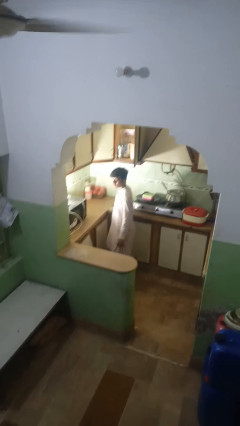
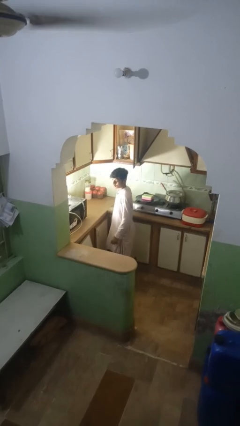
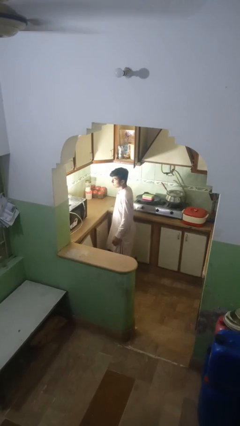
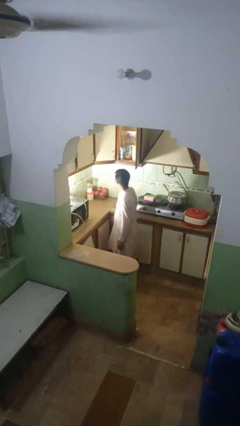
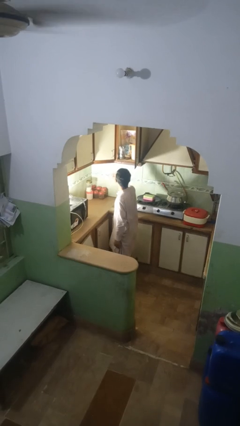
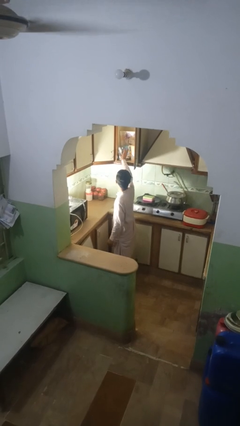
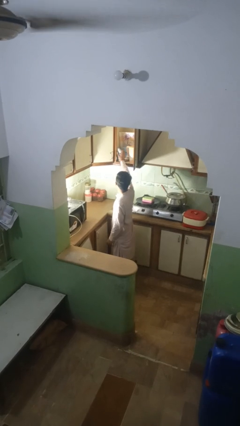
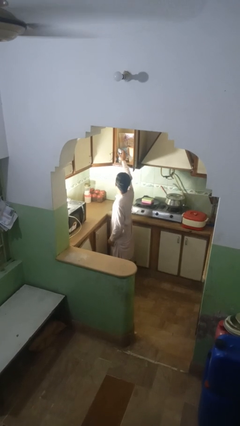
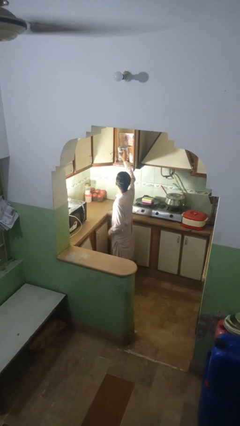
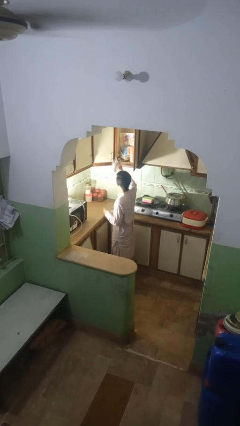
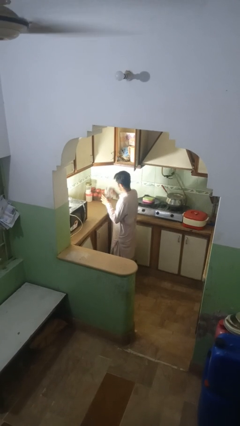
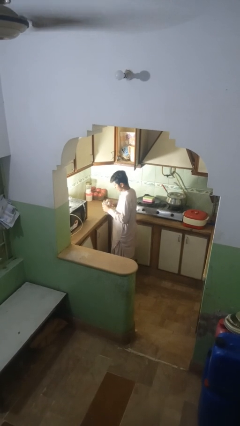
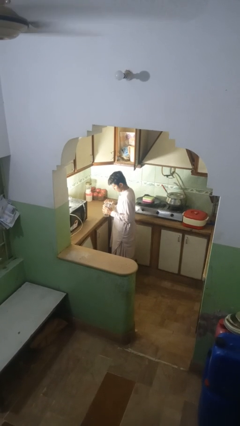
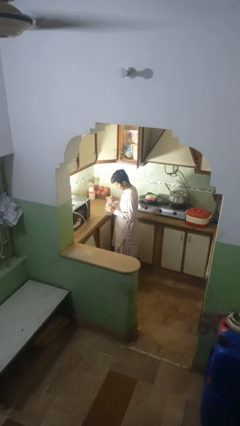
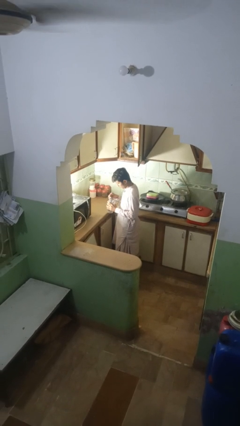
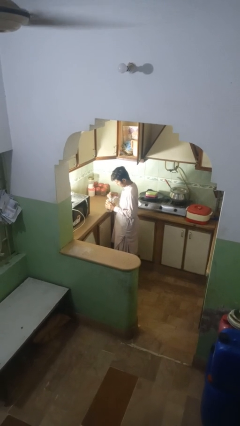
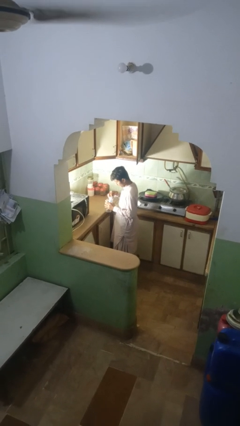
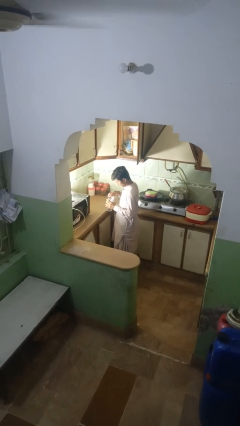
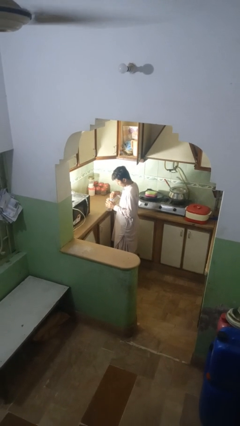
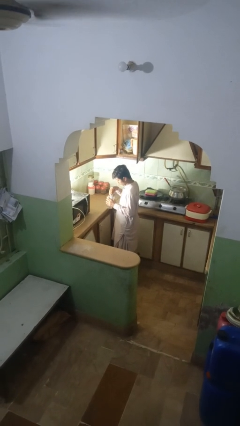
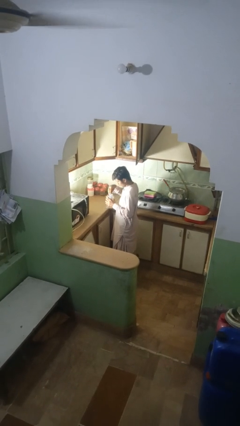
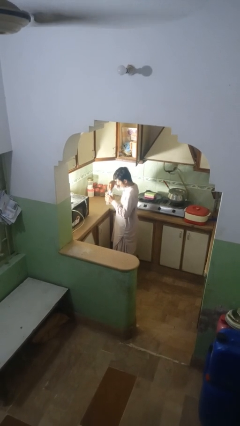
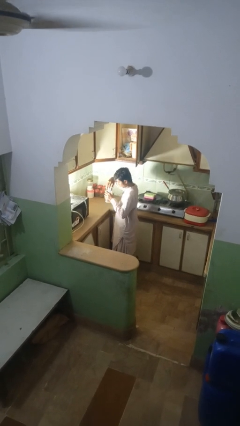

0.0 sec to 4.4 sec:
person takes object from kitchen drawer

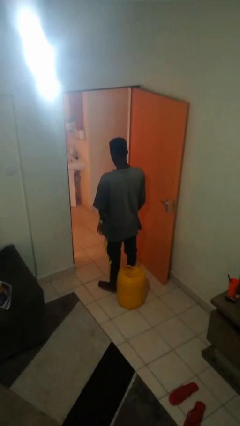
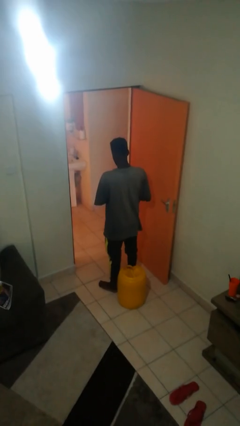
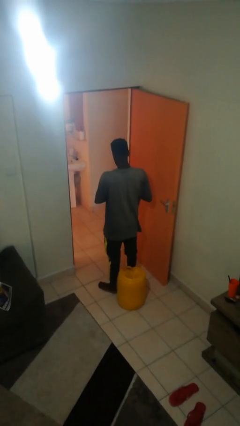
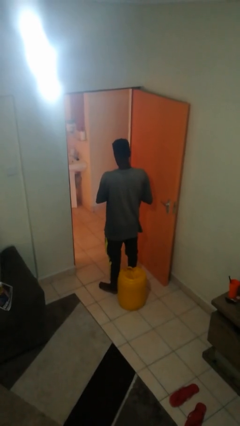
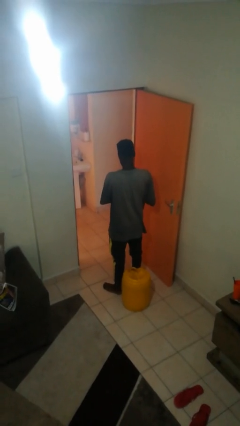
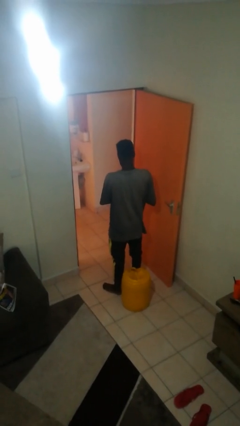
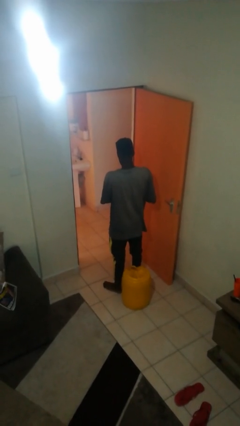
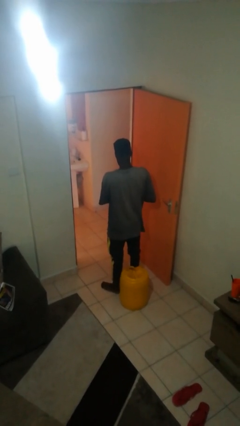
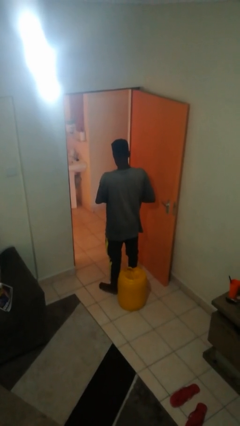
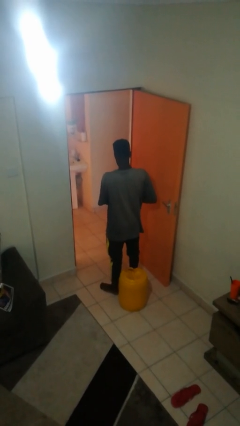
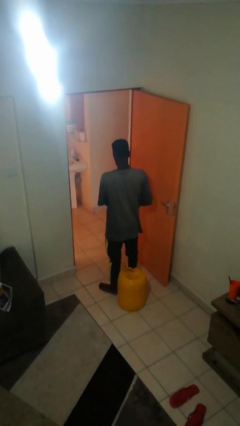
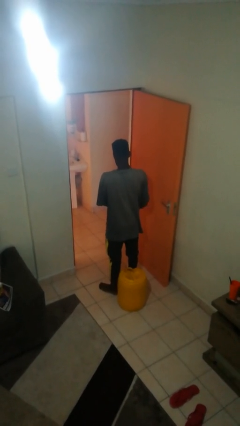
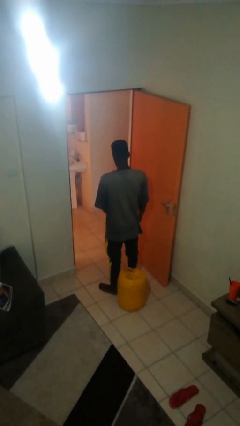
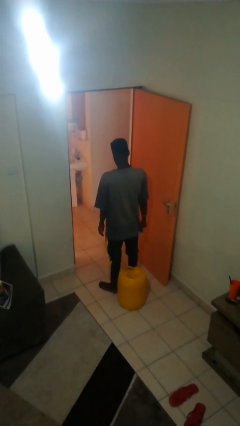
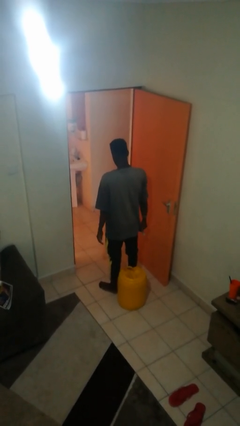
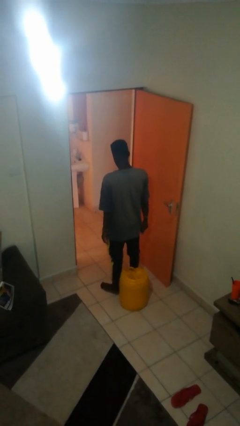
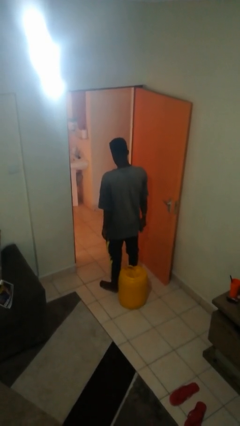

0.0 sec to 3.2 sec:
person takes off wristwatch

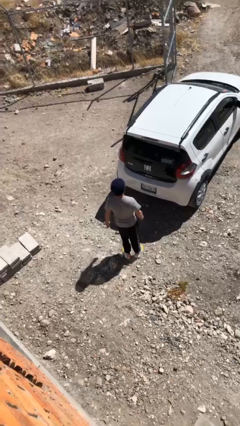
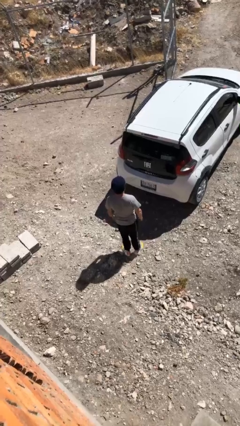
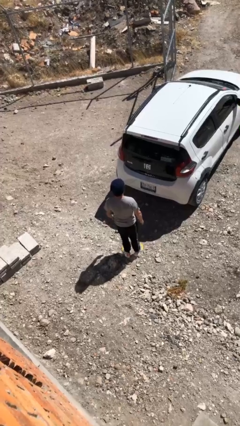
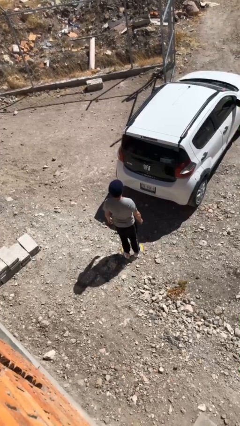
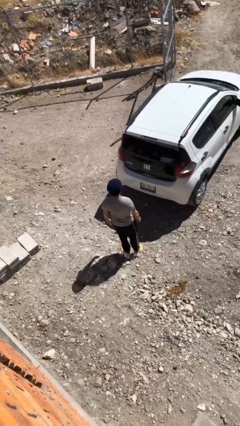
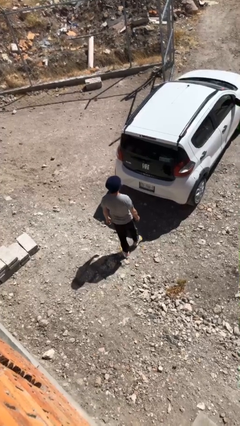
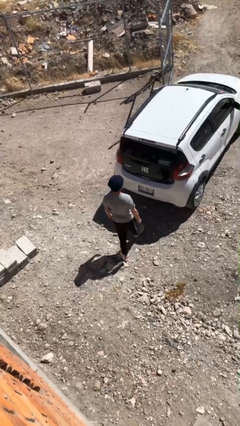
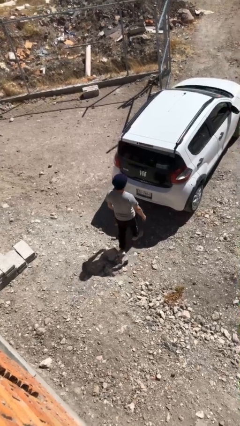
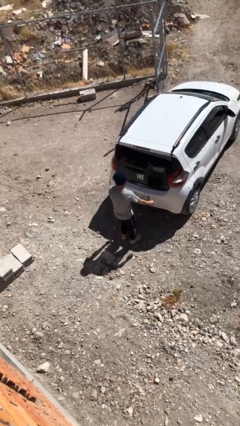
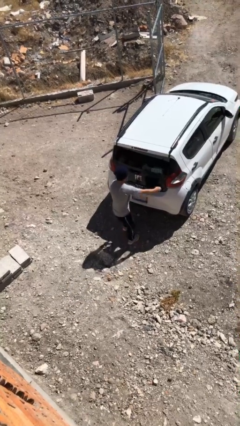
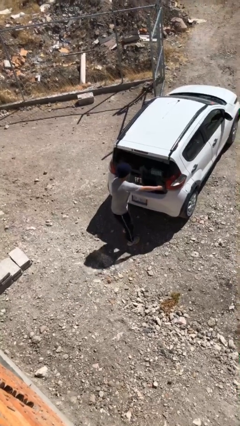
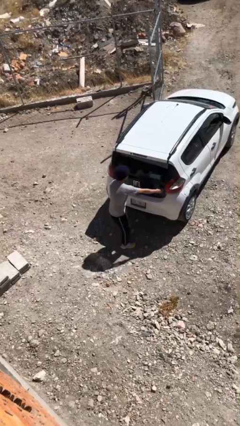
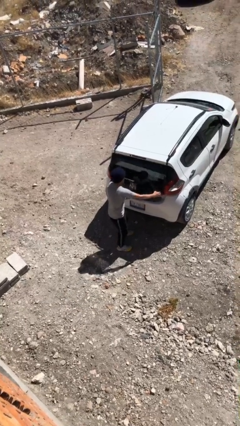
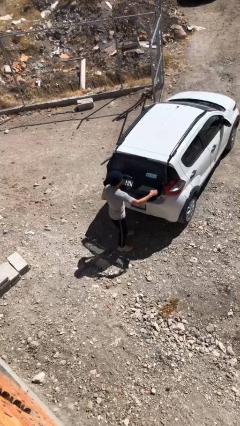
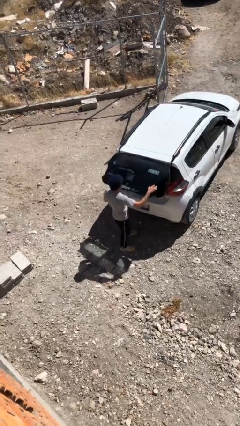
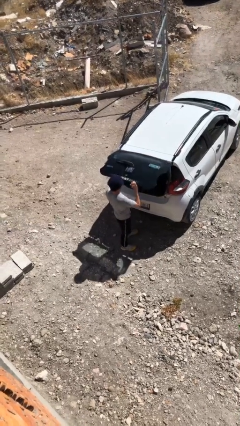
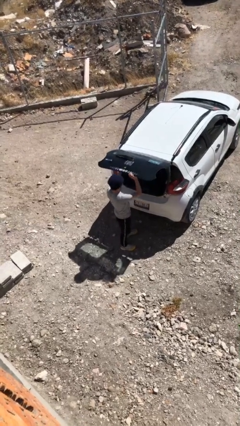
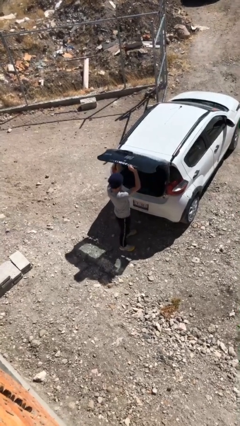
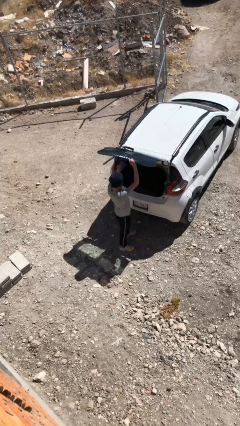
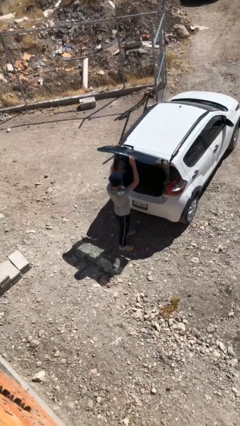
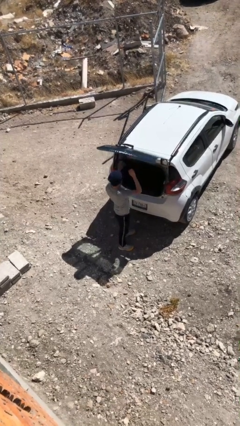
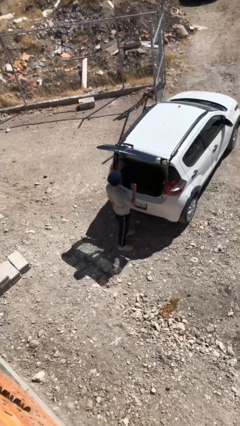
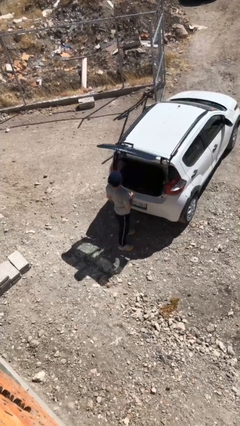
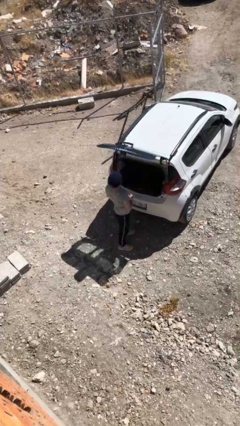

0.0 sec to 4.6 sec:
person opens car trunk

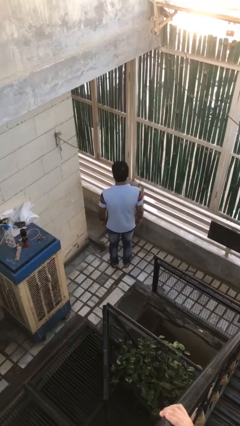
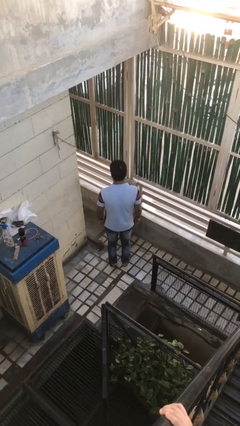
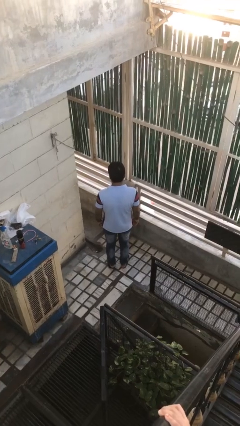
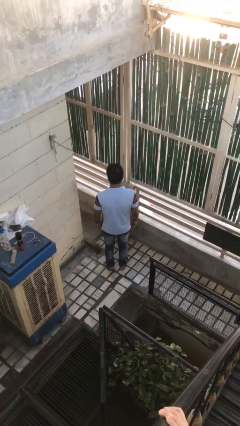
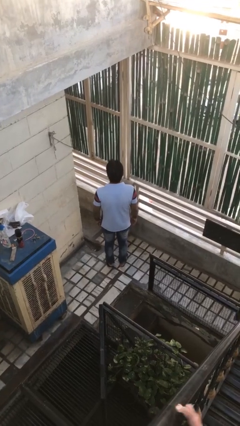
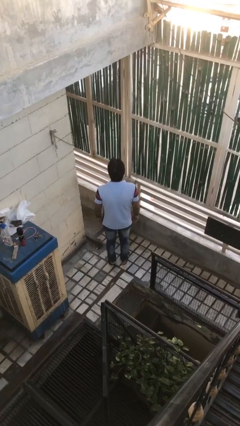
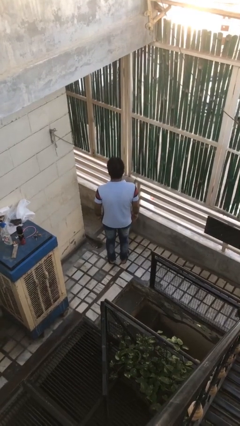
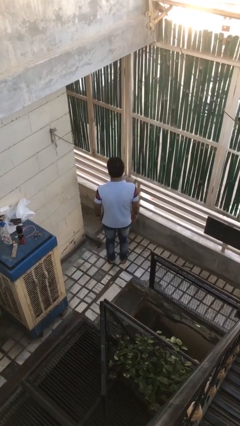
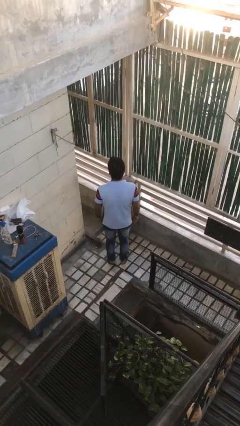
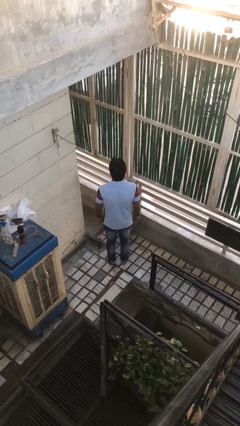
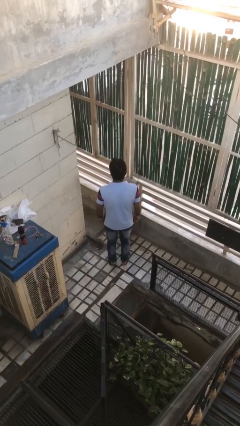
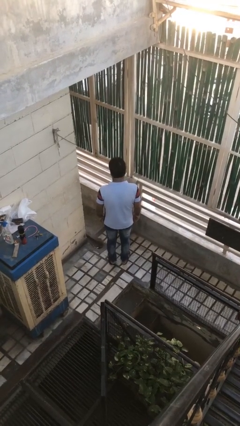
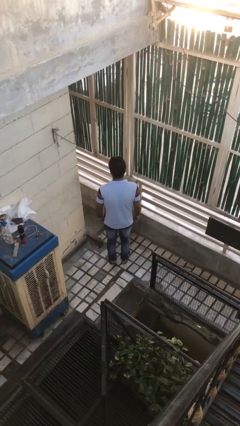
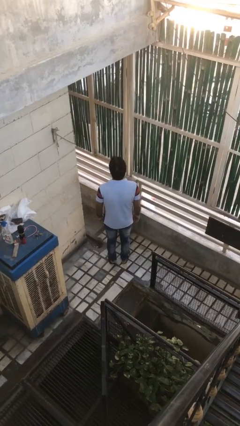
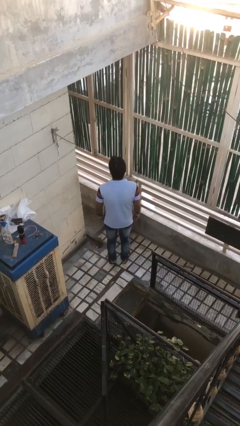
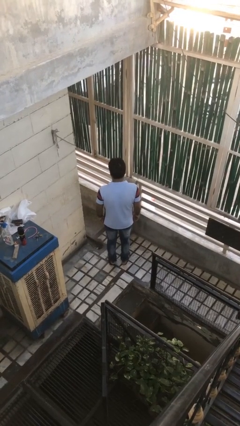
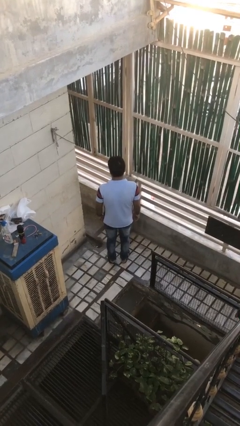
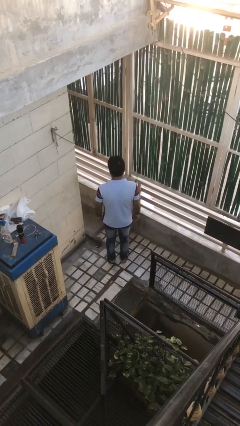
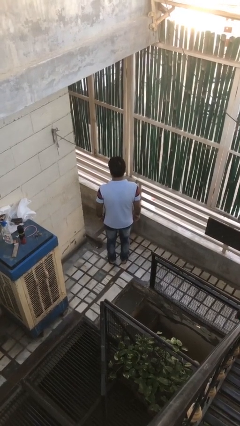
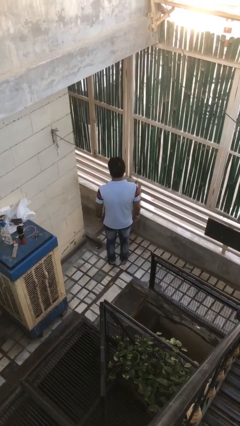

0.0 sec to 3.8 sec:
person nods head

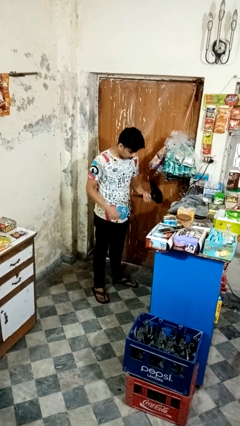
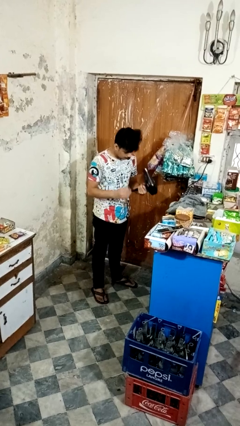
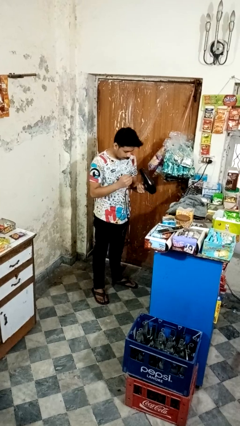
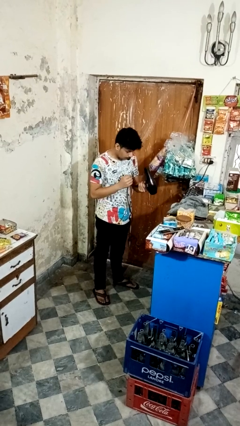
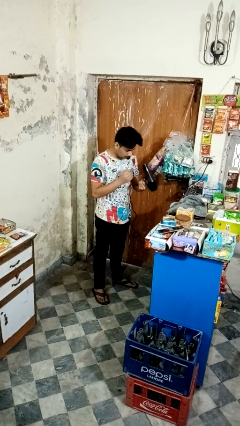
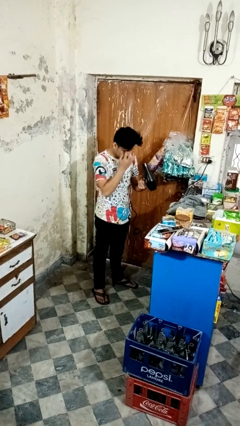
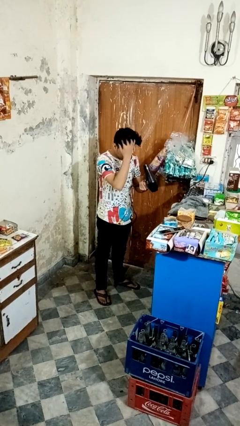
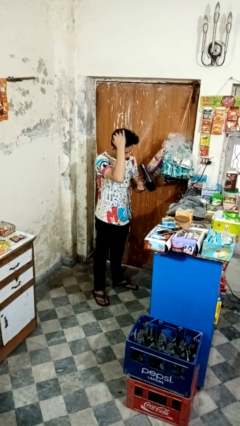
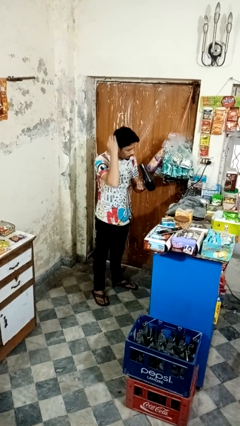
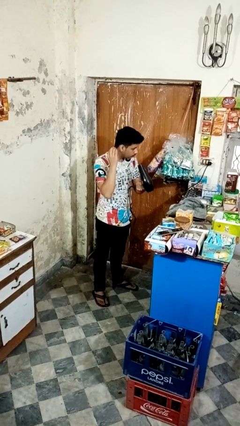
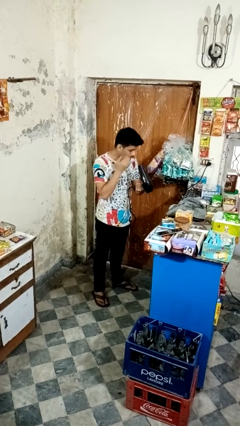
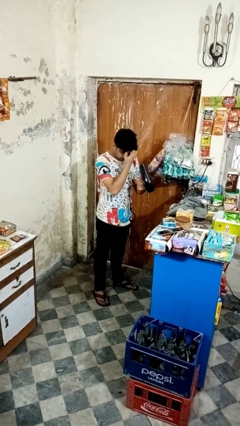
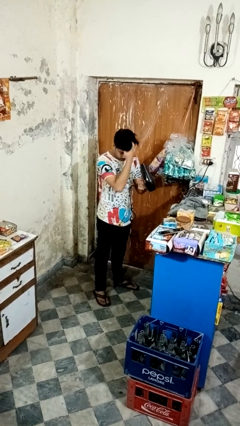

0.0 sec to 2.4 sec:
person dries hair with hairdryer
